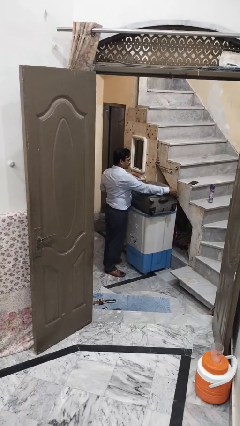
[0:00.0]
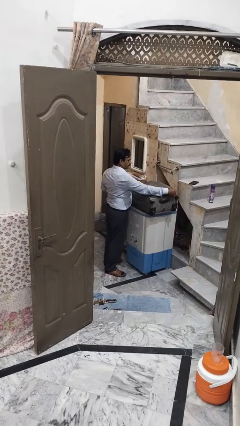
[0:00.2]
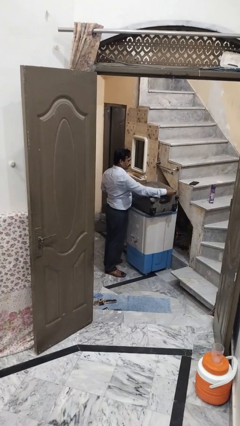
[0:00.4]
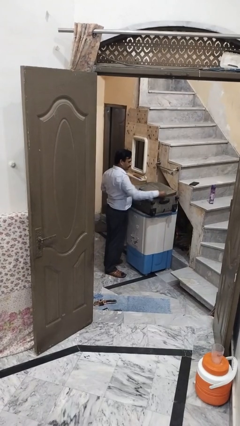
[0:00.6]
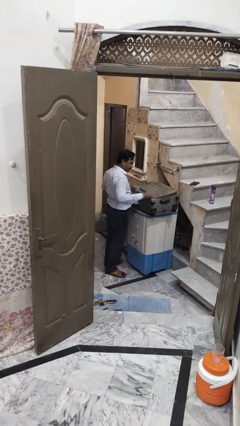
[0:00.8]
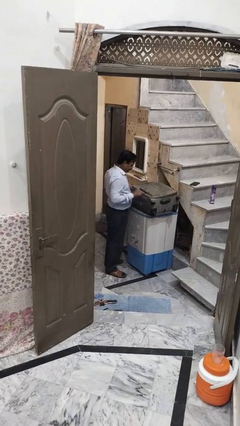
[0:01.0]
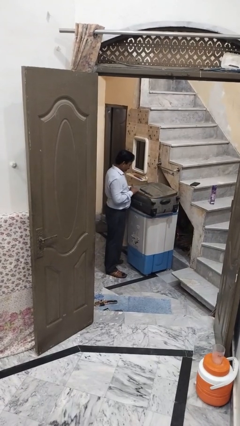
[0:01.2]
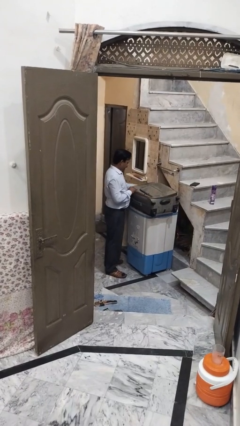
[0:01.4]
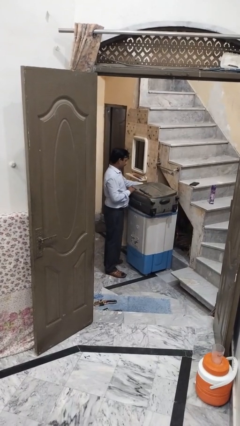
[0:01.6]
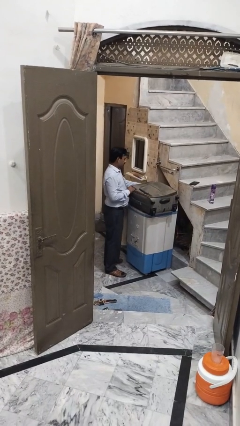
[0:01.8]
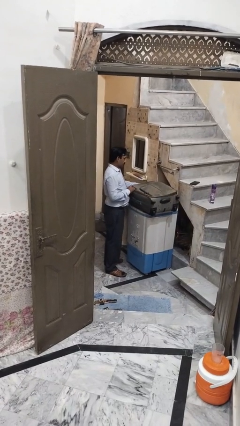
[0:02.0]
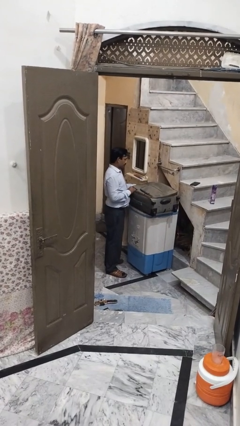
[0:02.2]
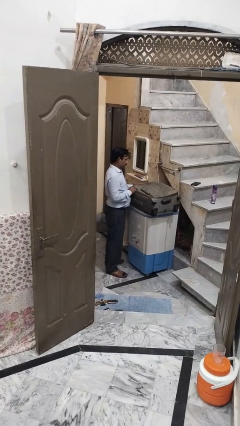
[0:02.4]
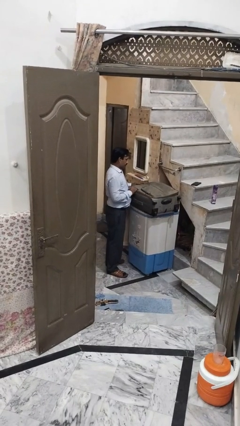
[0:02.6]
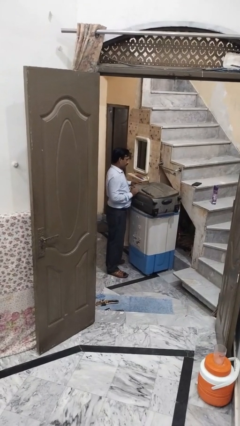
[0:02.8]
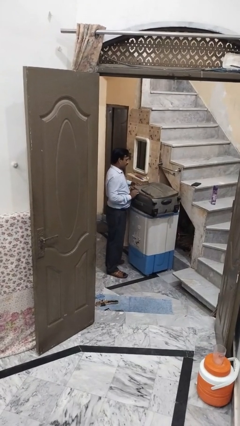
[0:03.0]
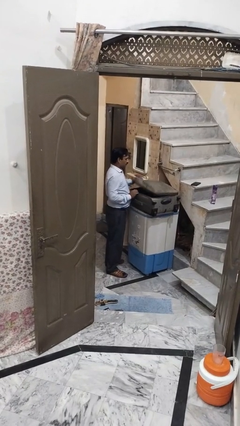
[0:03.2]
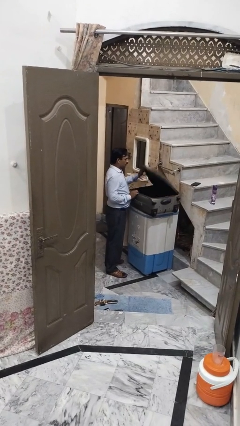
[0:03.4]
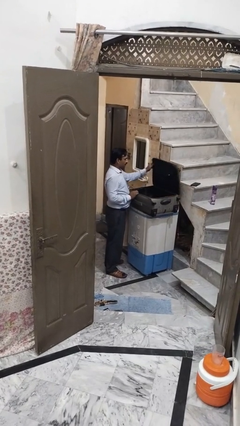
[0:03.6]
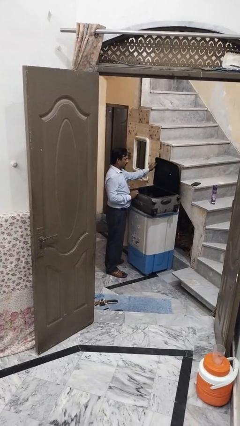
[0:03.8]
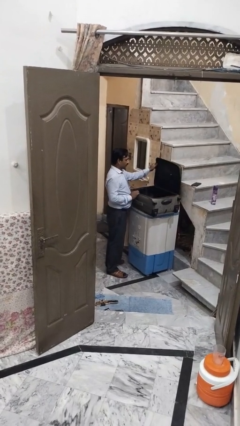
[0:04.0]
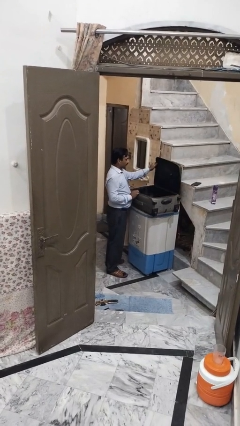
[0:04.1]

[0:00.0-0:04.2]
person opens suitcase

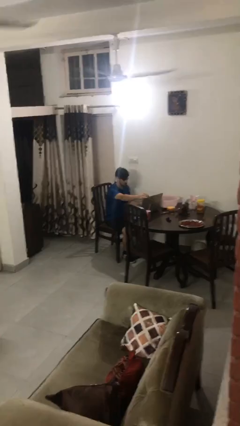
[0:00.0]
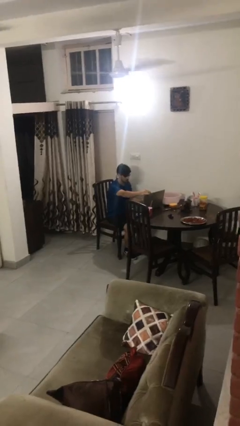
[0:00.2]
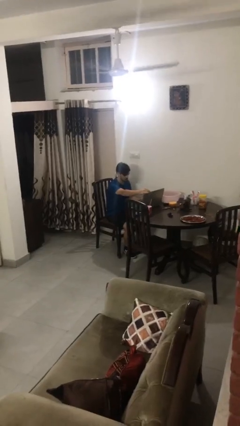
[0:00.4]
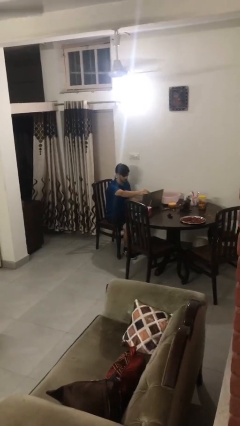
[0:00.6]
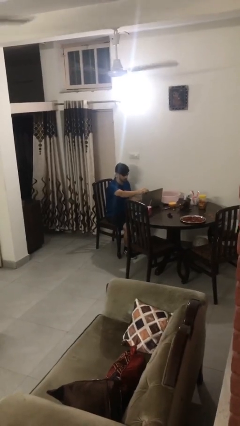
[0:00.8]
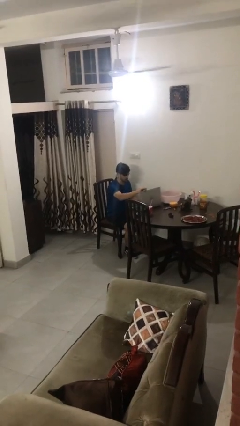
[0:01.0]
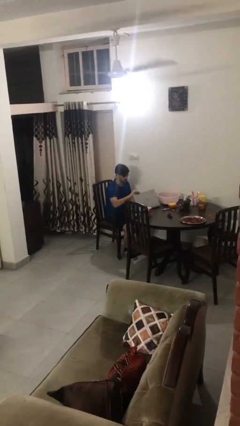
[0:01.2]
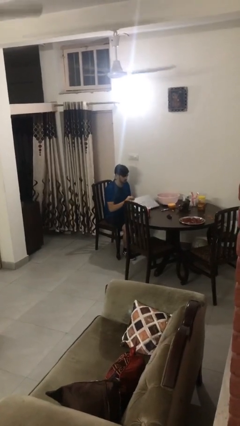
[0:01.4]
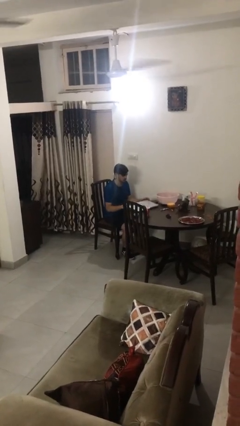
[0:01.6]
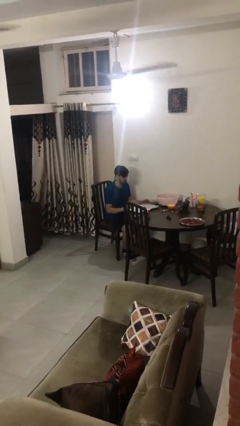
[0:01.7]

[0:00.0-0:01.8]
person closes laptop

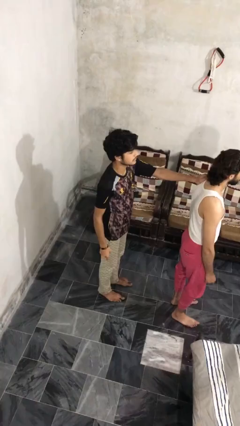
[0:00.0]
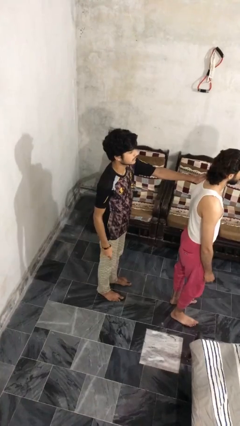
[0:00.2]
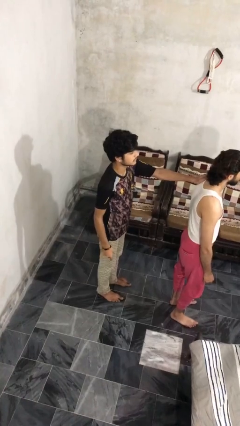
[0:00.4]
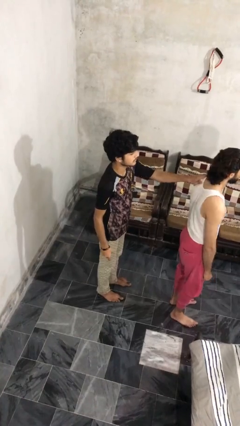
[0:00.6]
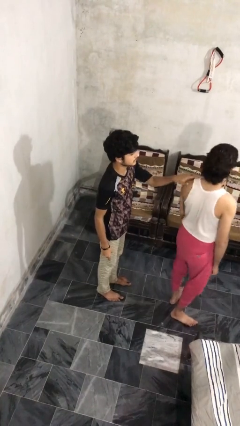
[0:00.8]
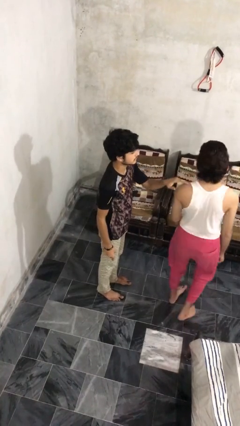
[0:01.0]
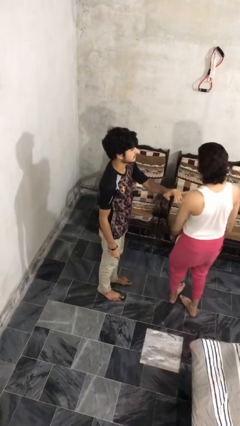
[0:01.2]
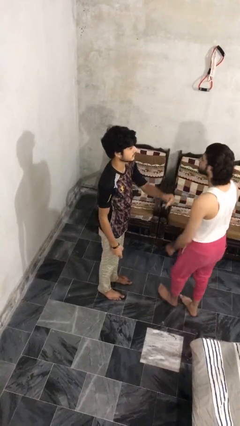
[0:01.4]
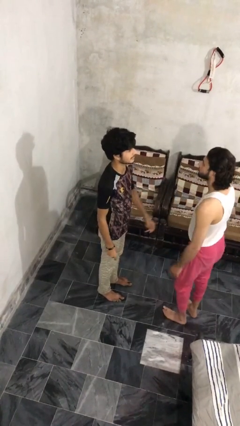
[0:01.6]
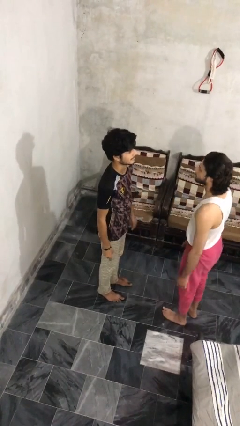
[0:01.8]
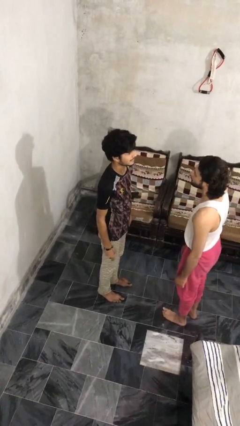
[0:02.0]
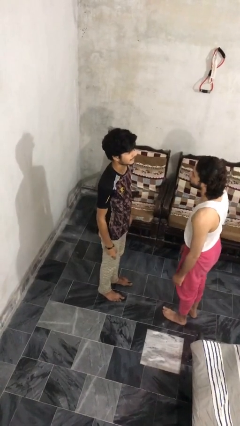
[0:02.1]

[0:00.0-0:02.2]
person spins person around

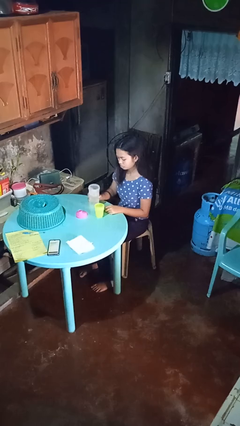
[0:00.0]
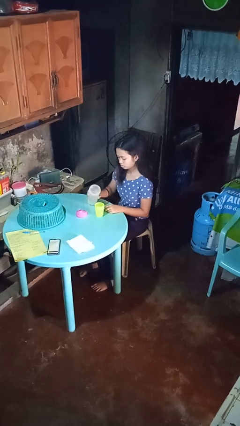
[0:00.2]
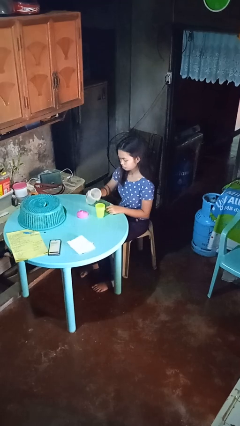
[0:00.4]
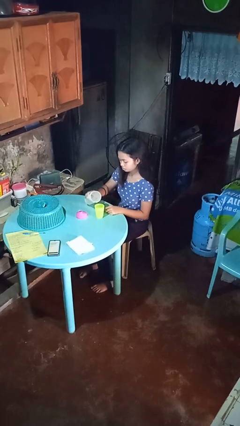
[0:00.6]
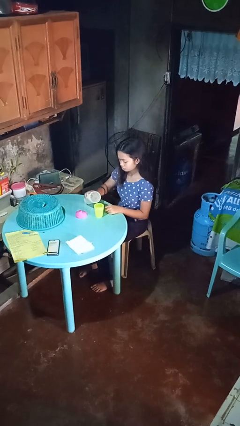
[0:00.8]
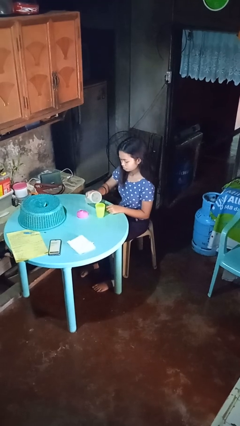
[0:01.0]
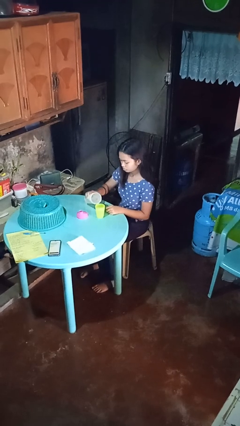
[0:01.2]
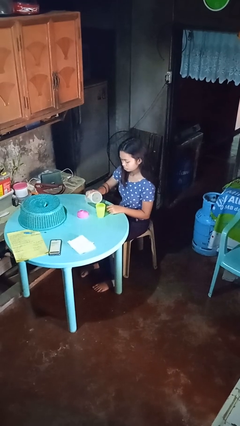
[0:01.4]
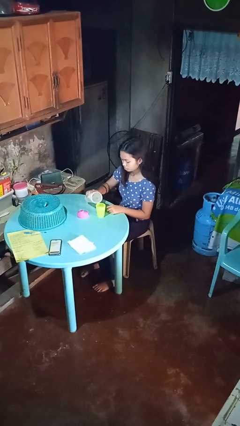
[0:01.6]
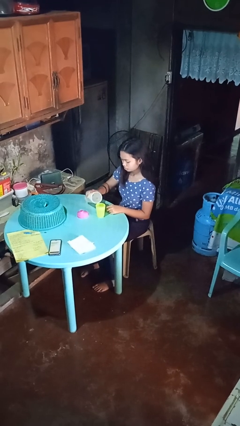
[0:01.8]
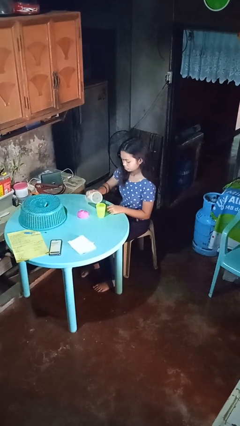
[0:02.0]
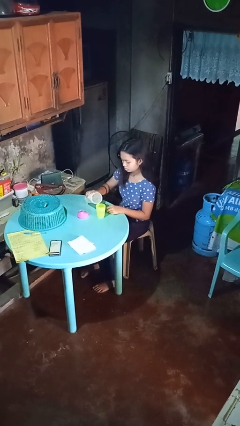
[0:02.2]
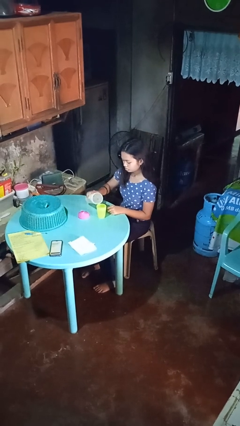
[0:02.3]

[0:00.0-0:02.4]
person pours liquid into cup

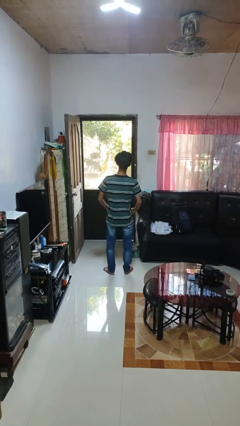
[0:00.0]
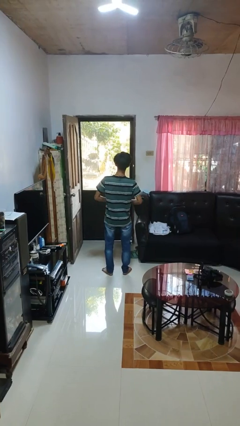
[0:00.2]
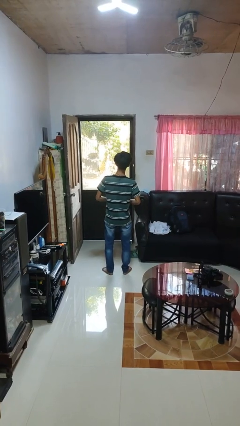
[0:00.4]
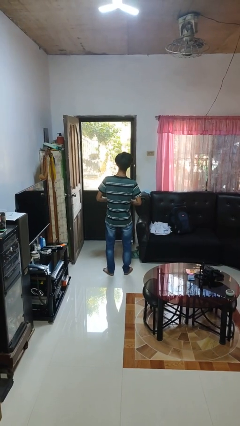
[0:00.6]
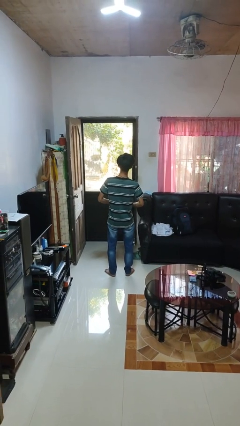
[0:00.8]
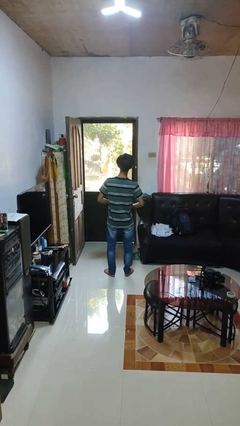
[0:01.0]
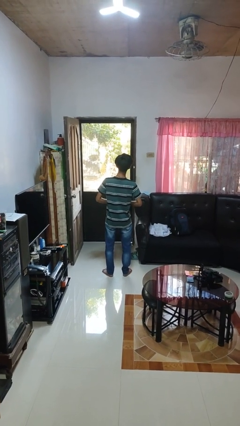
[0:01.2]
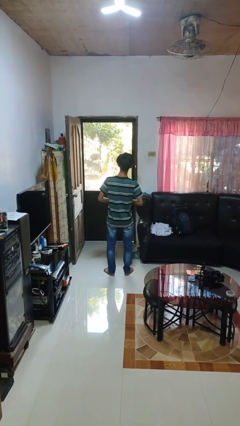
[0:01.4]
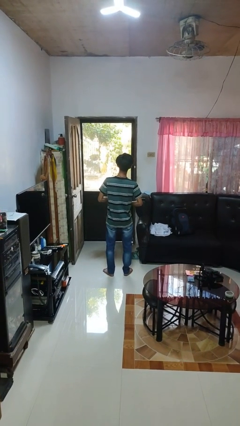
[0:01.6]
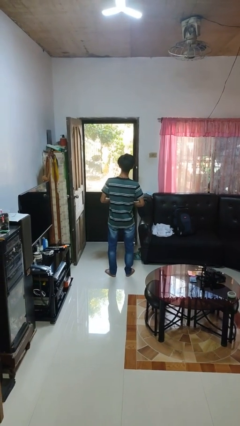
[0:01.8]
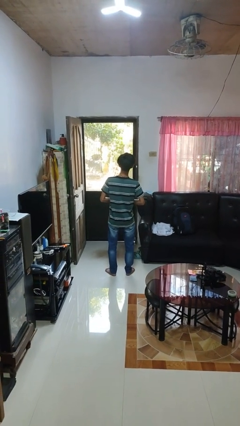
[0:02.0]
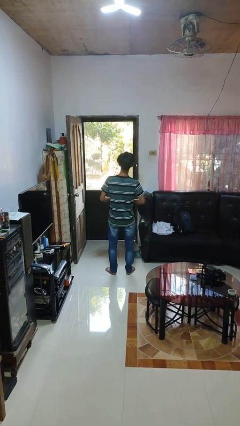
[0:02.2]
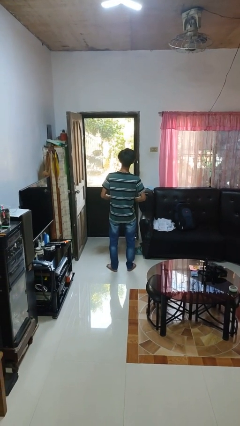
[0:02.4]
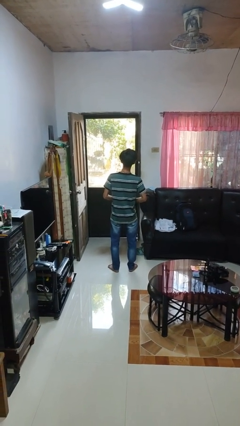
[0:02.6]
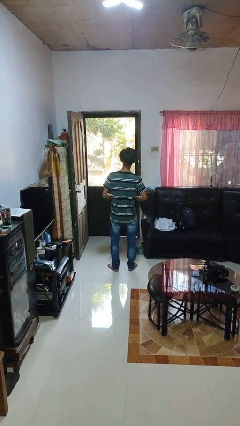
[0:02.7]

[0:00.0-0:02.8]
person buttons shirt

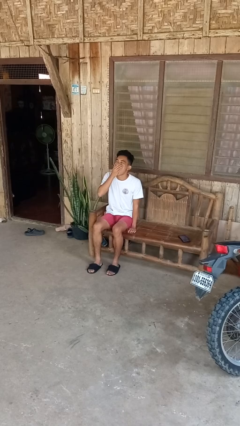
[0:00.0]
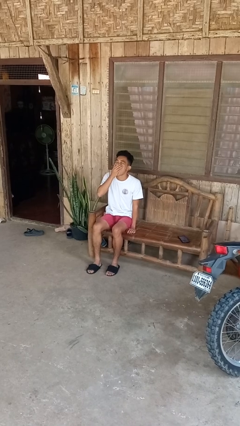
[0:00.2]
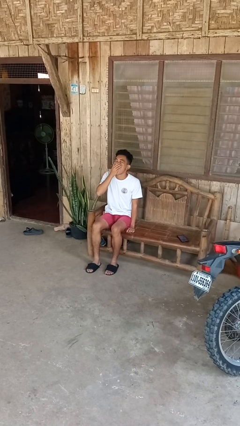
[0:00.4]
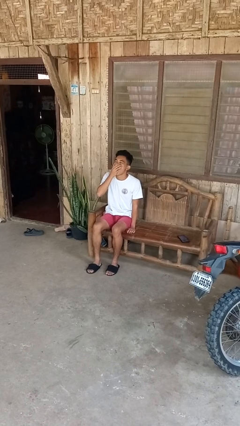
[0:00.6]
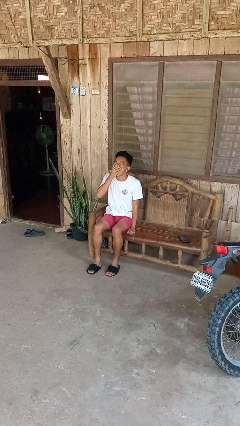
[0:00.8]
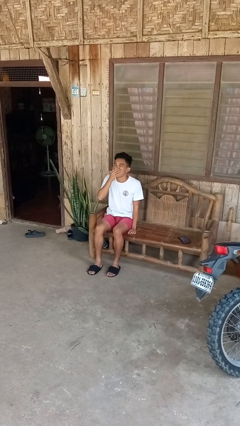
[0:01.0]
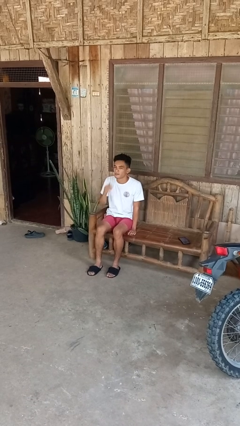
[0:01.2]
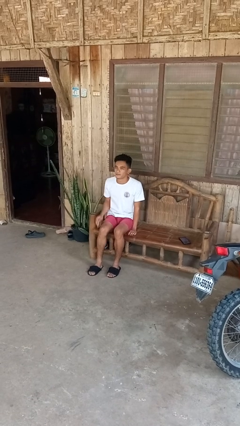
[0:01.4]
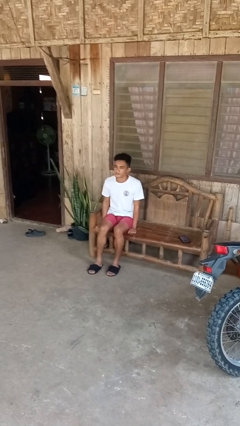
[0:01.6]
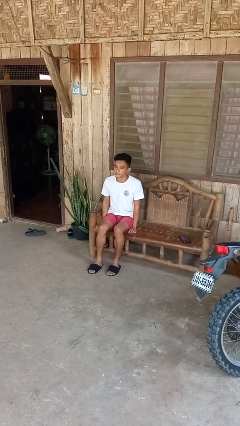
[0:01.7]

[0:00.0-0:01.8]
person yawns

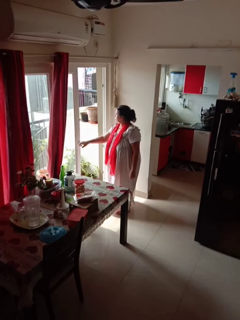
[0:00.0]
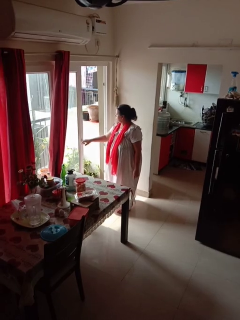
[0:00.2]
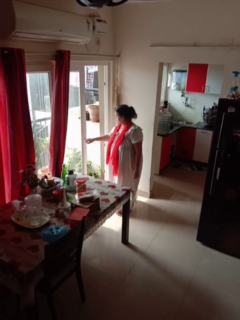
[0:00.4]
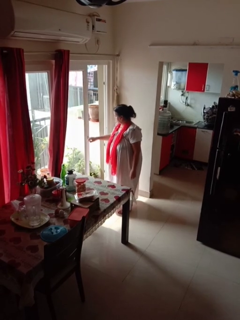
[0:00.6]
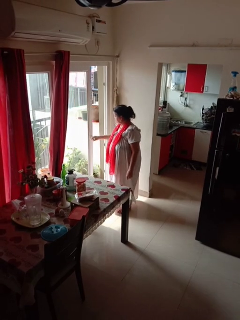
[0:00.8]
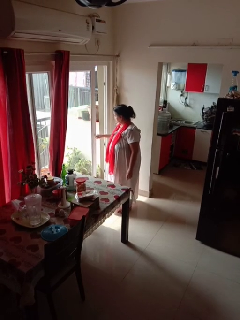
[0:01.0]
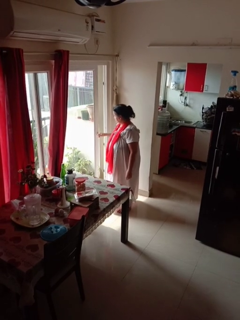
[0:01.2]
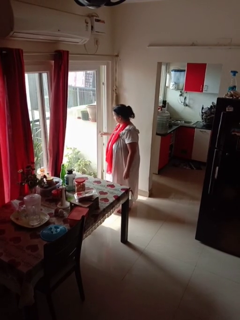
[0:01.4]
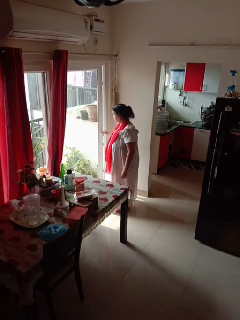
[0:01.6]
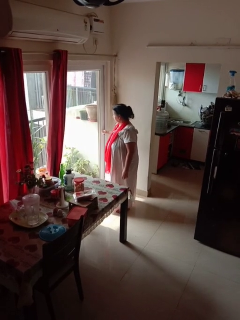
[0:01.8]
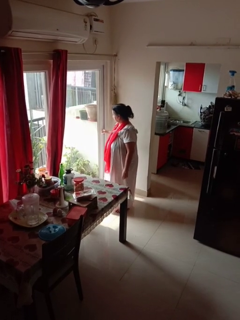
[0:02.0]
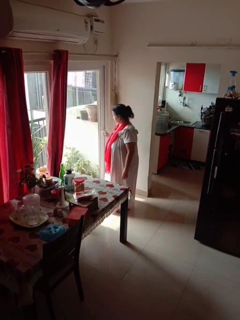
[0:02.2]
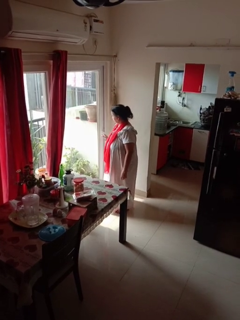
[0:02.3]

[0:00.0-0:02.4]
person closes sliding door
